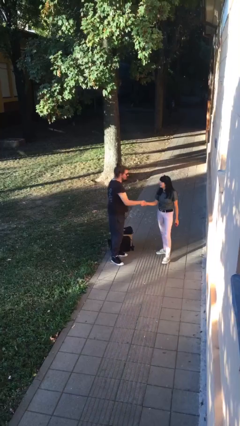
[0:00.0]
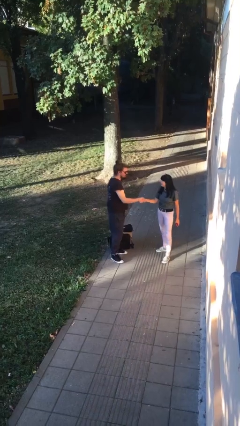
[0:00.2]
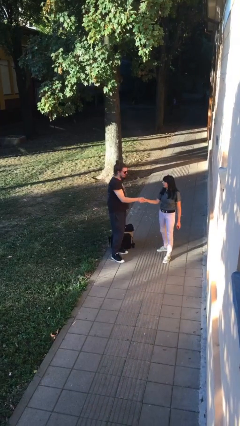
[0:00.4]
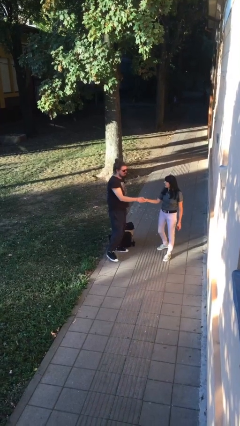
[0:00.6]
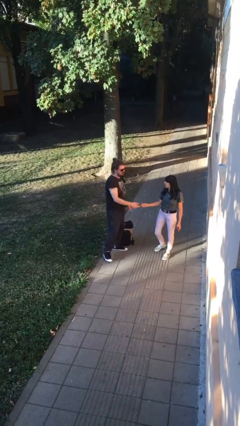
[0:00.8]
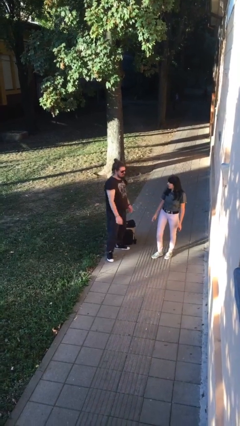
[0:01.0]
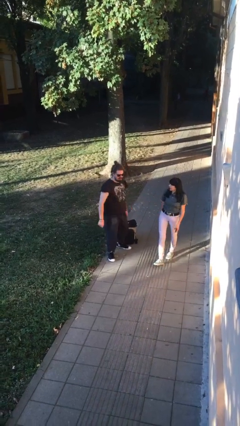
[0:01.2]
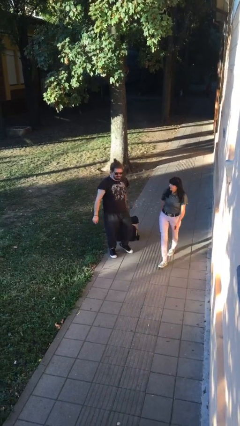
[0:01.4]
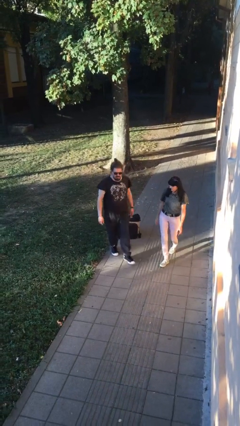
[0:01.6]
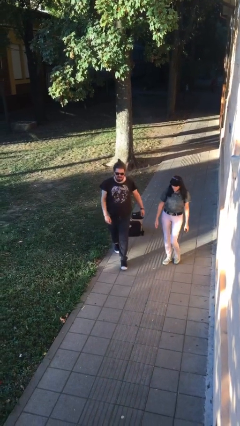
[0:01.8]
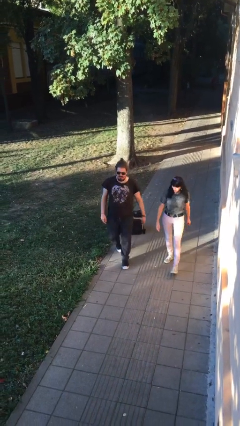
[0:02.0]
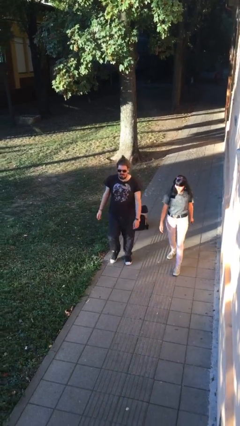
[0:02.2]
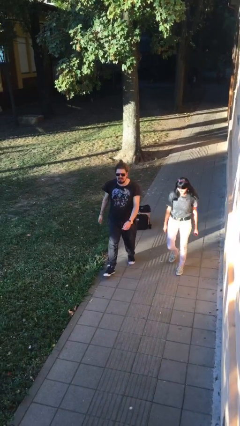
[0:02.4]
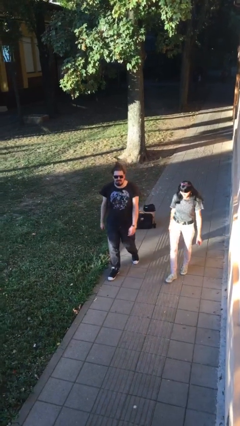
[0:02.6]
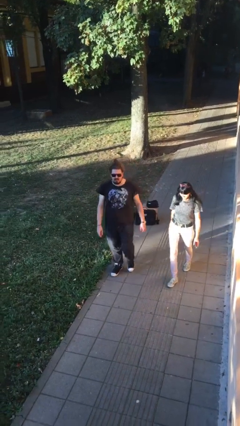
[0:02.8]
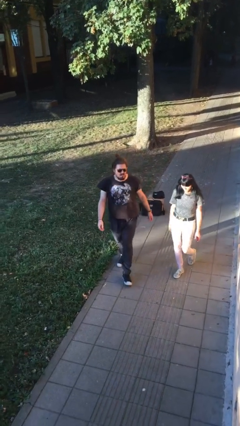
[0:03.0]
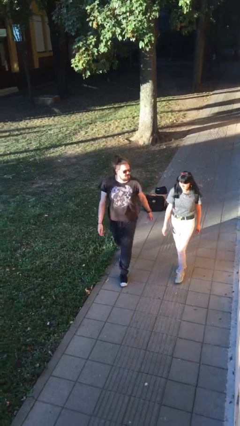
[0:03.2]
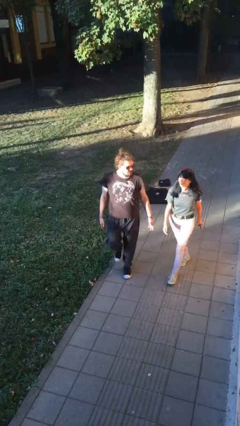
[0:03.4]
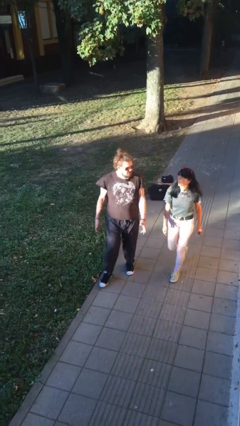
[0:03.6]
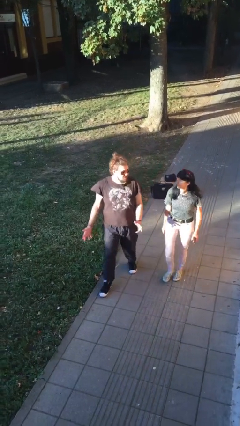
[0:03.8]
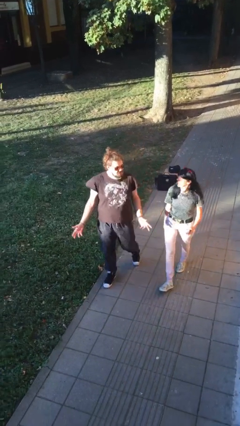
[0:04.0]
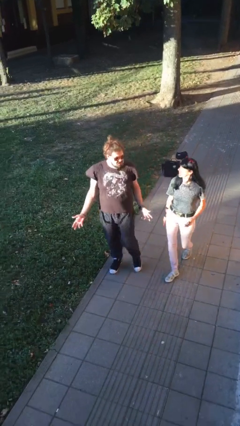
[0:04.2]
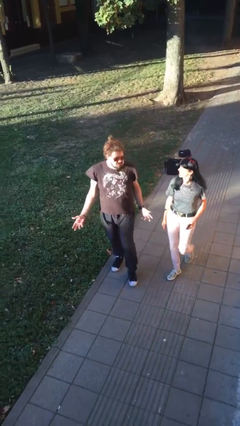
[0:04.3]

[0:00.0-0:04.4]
person talks to person

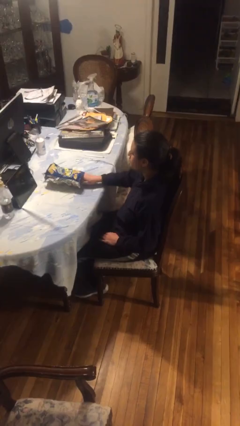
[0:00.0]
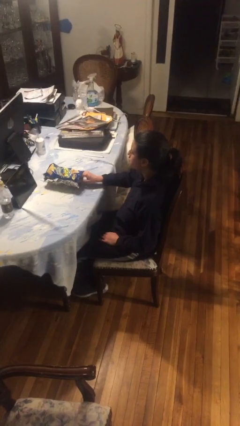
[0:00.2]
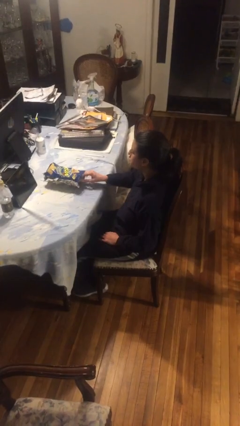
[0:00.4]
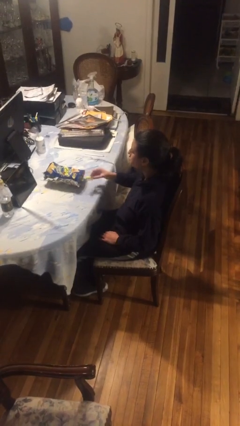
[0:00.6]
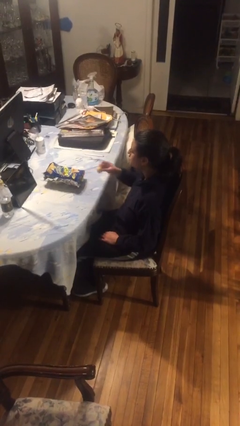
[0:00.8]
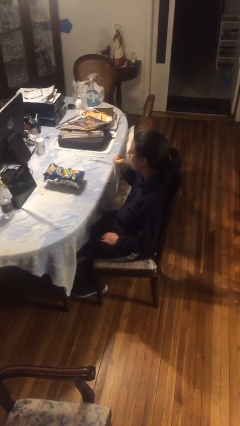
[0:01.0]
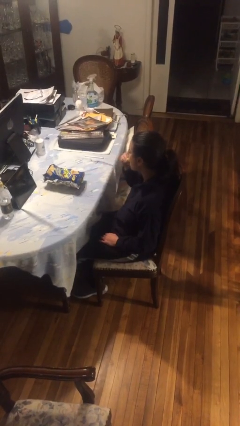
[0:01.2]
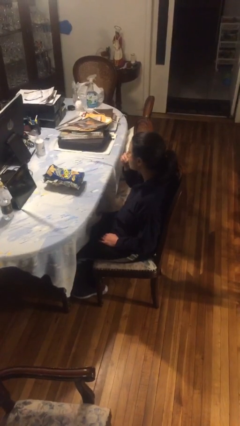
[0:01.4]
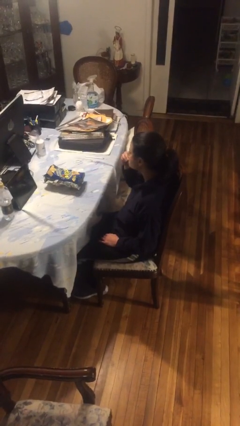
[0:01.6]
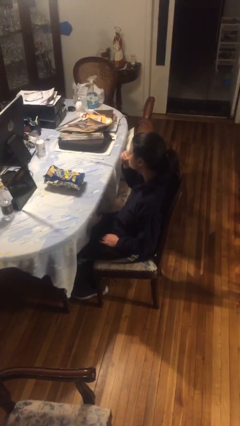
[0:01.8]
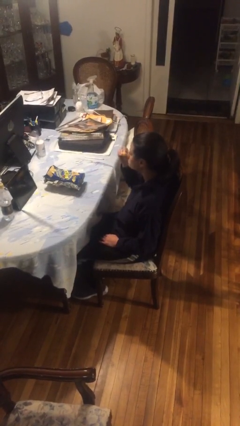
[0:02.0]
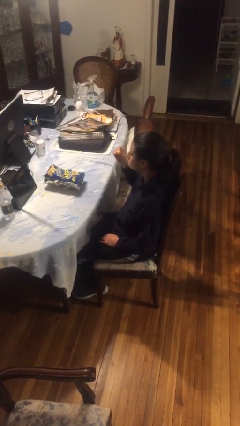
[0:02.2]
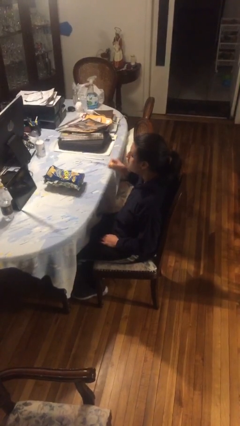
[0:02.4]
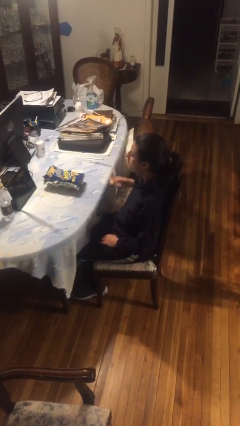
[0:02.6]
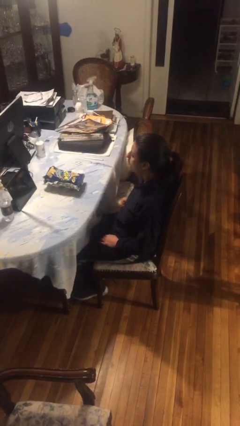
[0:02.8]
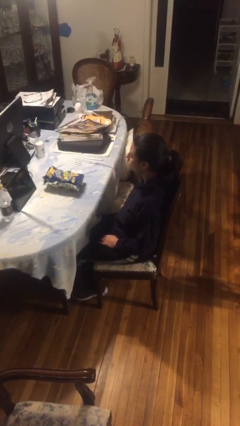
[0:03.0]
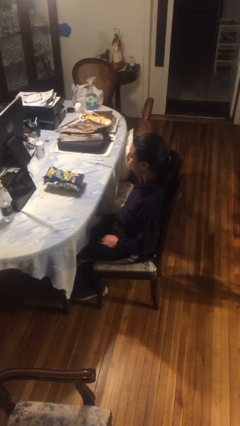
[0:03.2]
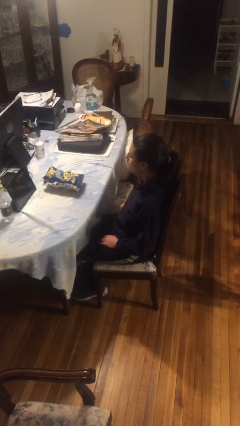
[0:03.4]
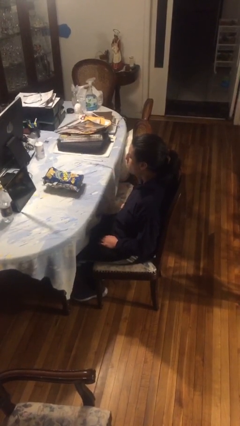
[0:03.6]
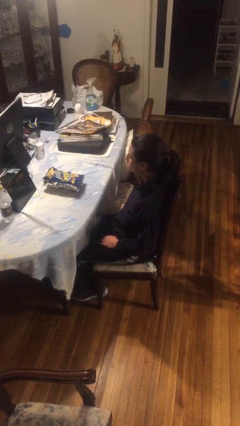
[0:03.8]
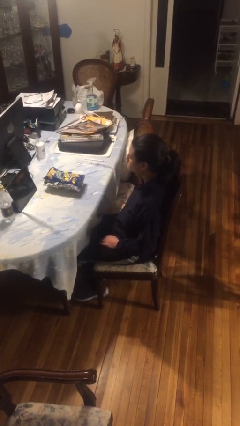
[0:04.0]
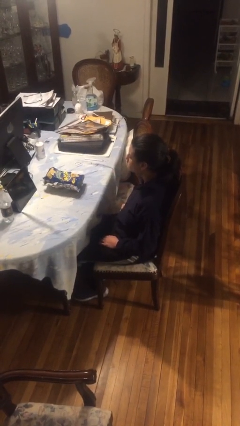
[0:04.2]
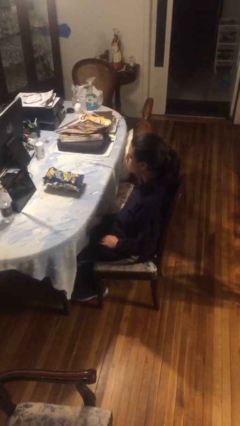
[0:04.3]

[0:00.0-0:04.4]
person eats snack from bag

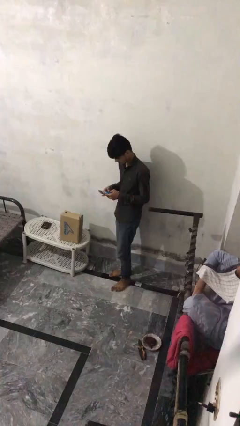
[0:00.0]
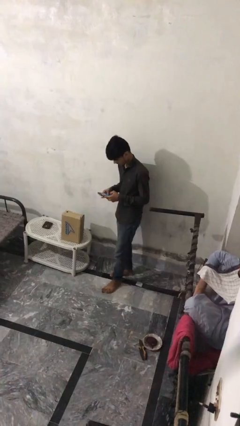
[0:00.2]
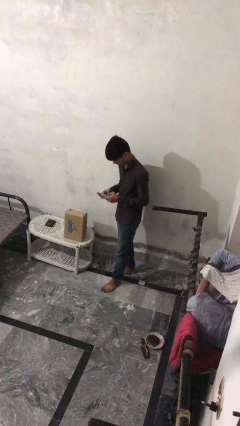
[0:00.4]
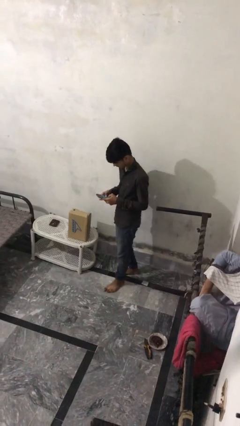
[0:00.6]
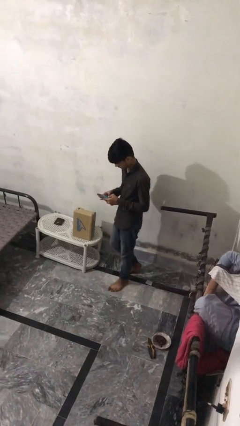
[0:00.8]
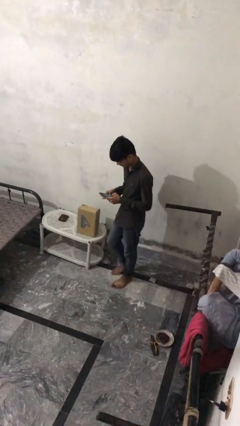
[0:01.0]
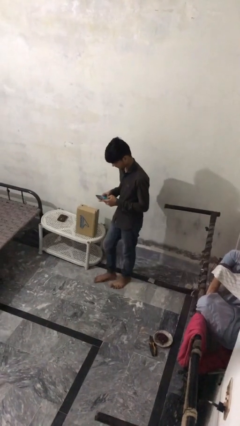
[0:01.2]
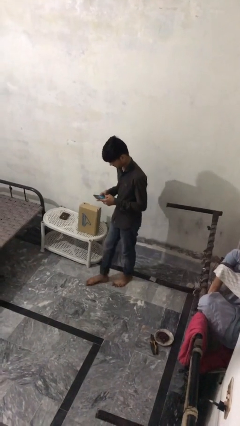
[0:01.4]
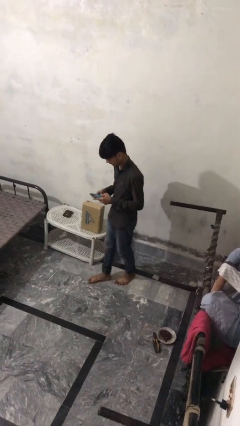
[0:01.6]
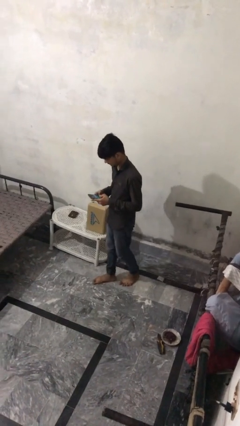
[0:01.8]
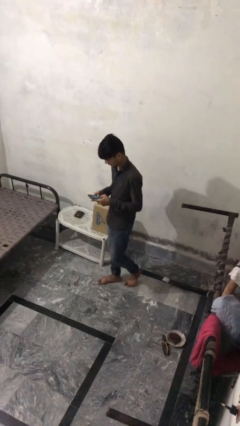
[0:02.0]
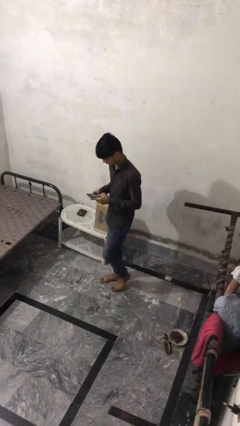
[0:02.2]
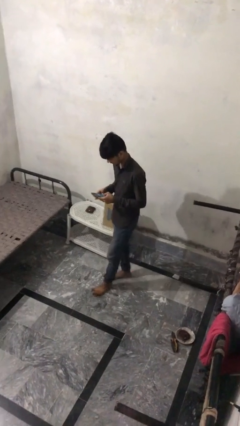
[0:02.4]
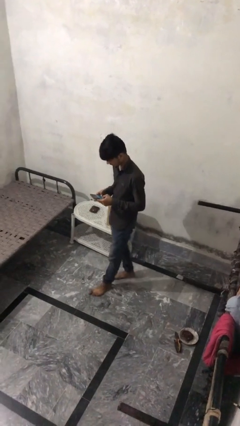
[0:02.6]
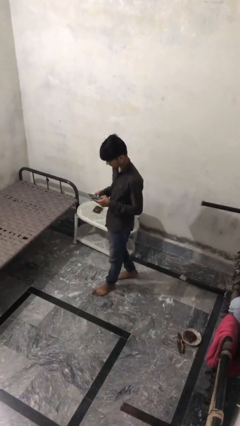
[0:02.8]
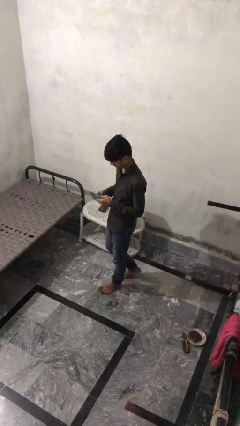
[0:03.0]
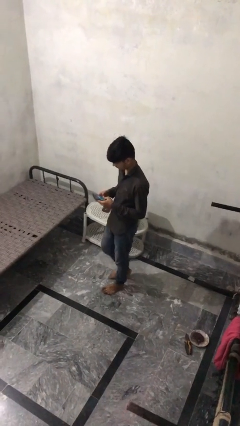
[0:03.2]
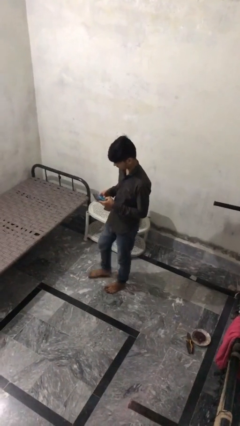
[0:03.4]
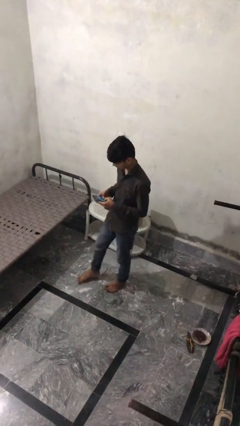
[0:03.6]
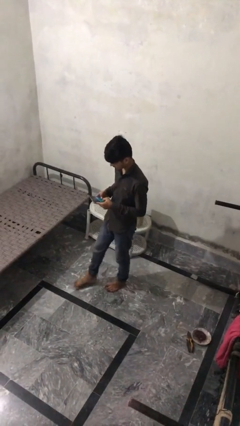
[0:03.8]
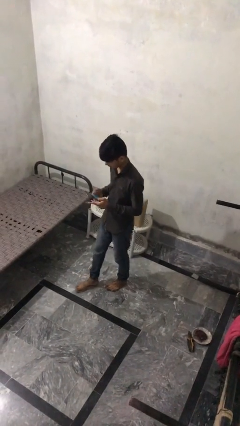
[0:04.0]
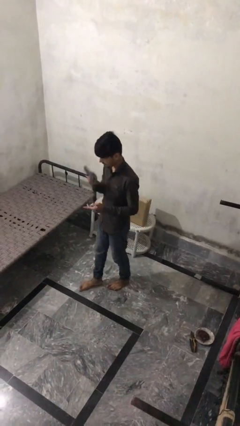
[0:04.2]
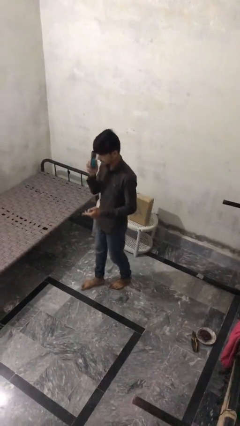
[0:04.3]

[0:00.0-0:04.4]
person texts on phone

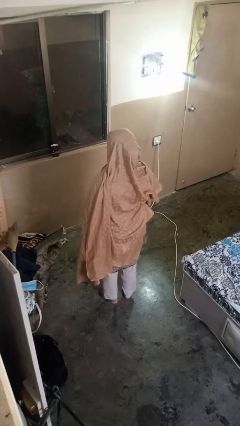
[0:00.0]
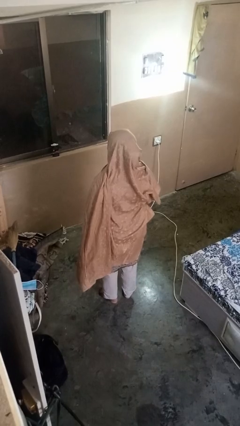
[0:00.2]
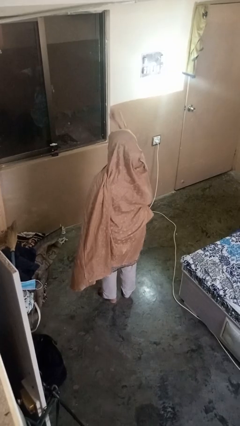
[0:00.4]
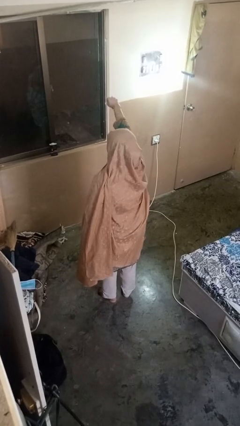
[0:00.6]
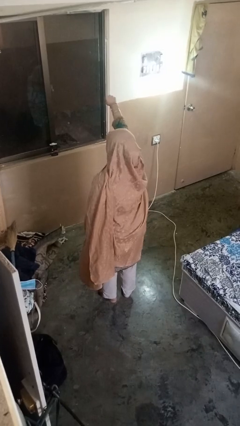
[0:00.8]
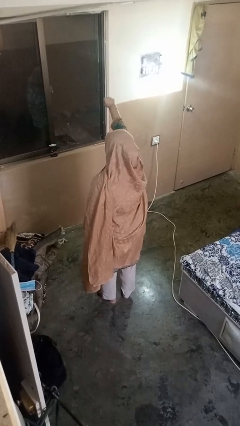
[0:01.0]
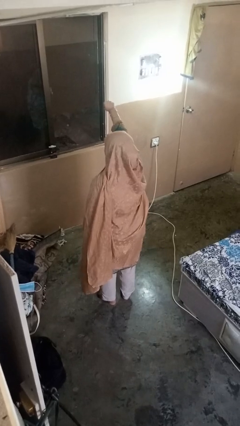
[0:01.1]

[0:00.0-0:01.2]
person punches

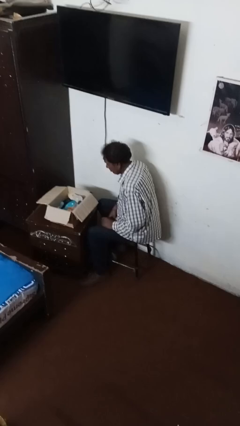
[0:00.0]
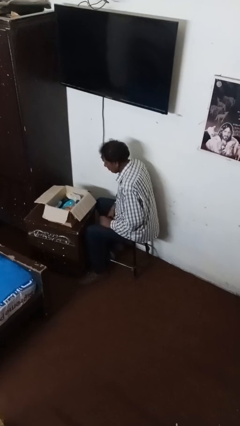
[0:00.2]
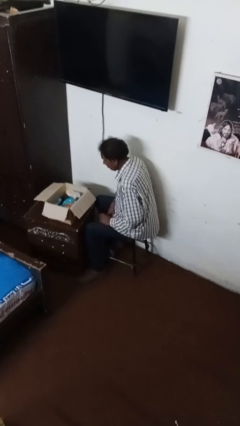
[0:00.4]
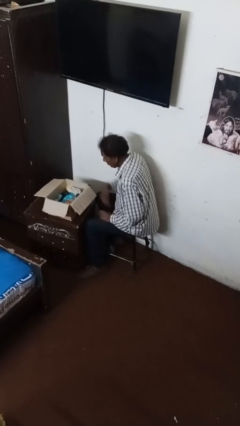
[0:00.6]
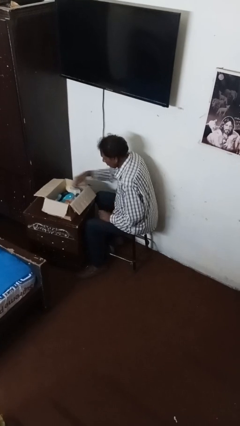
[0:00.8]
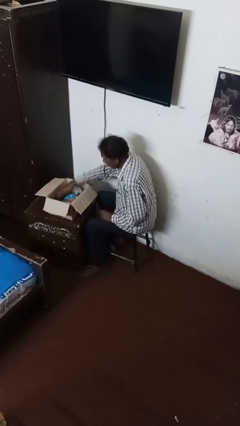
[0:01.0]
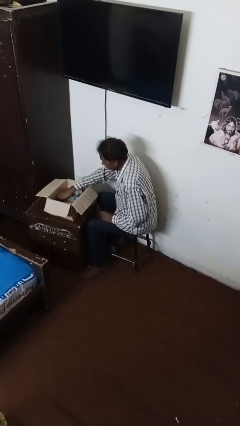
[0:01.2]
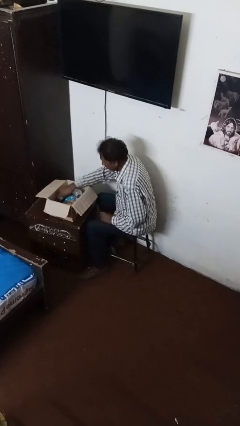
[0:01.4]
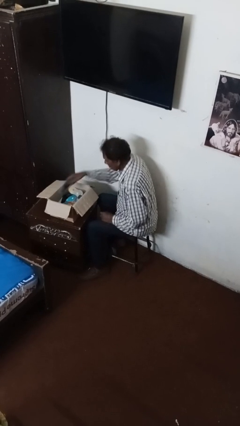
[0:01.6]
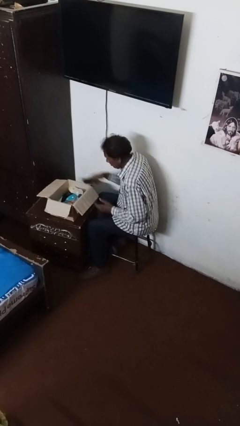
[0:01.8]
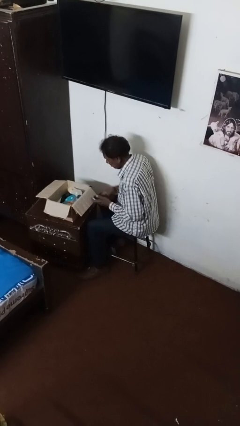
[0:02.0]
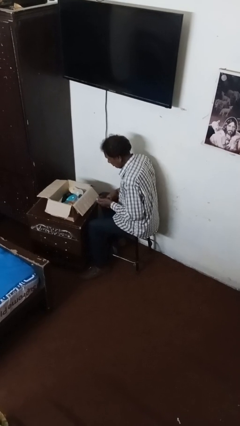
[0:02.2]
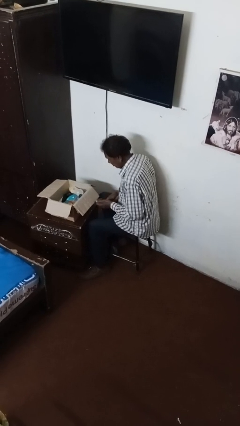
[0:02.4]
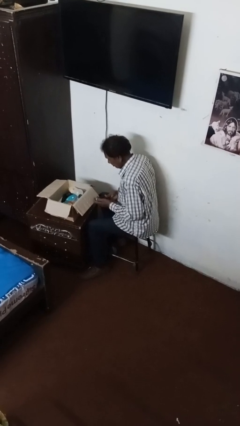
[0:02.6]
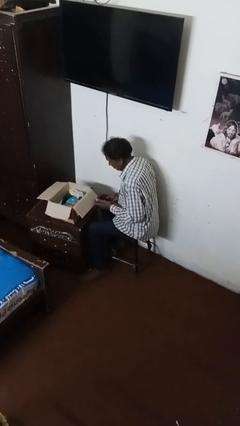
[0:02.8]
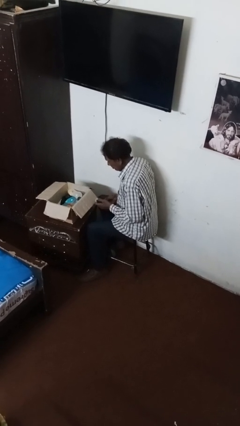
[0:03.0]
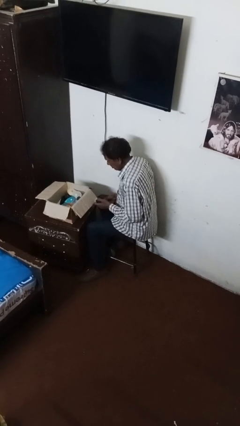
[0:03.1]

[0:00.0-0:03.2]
person searches in box
